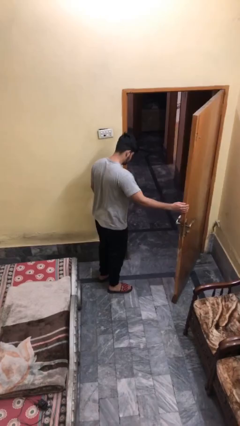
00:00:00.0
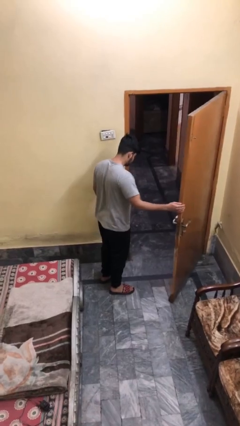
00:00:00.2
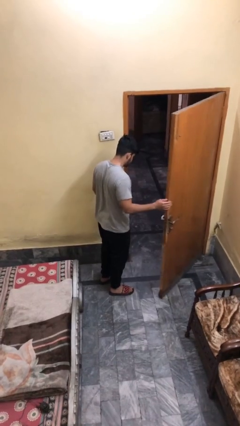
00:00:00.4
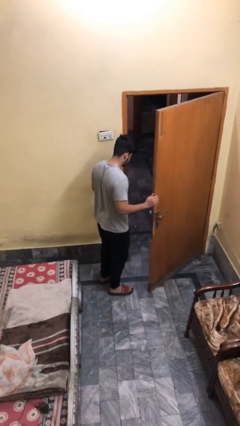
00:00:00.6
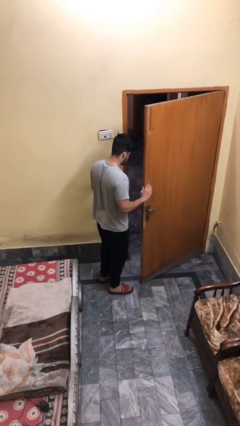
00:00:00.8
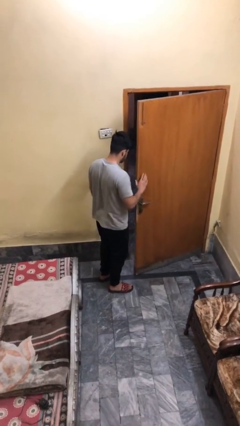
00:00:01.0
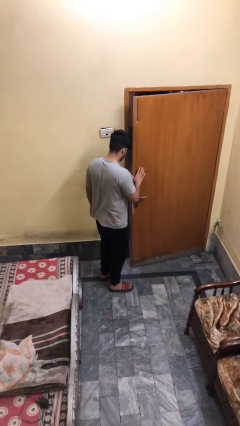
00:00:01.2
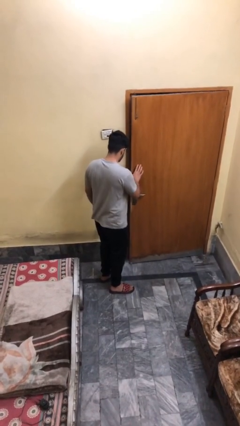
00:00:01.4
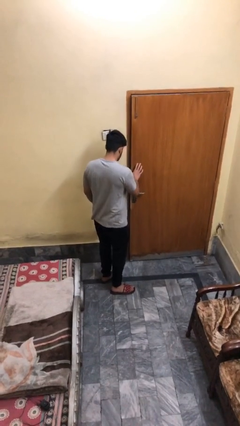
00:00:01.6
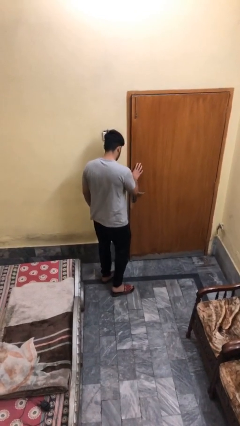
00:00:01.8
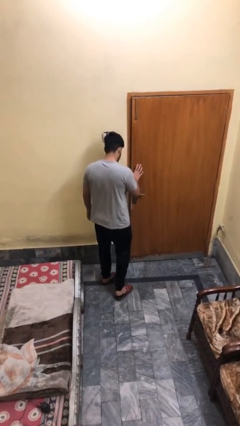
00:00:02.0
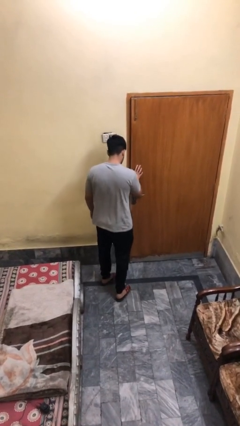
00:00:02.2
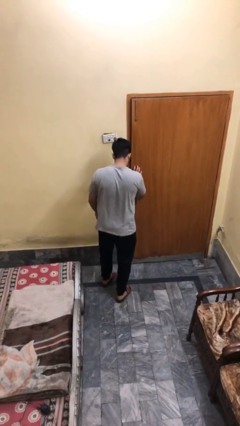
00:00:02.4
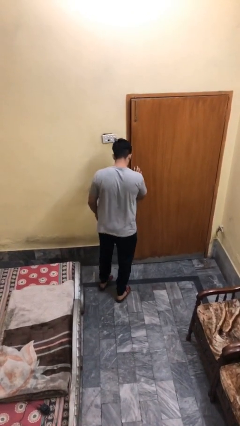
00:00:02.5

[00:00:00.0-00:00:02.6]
person closes facility door

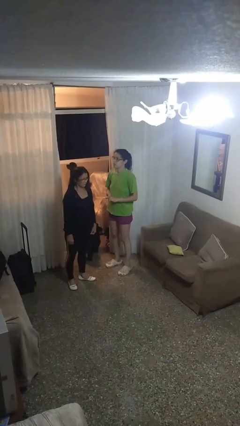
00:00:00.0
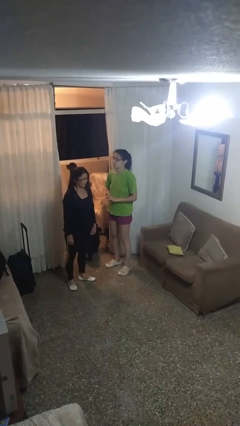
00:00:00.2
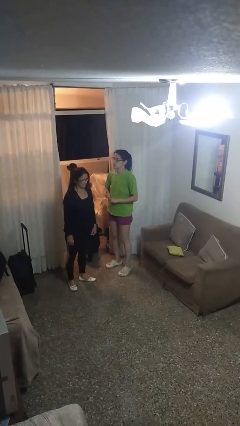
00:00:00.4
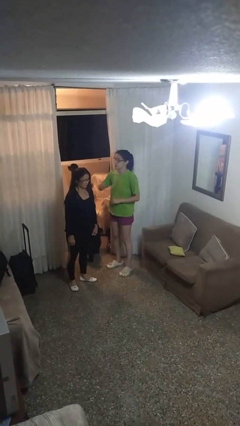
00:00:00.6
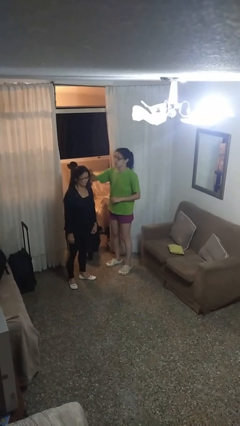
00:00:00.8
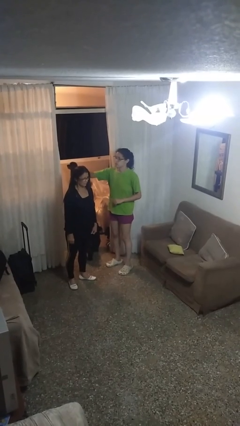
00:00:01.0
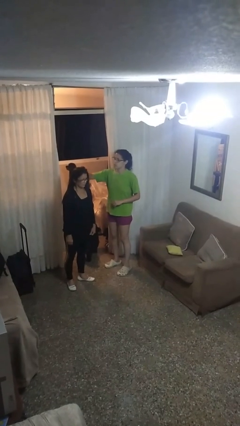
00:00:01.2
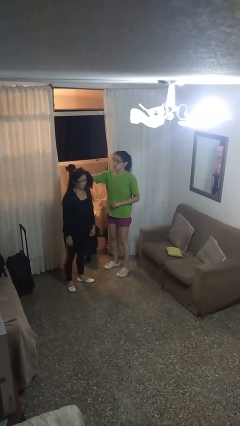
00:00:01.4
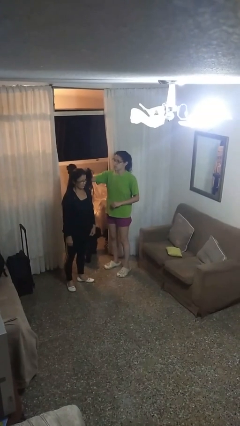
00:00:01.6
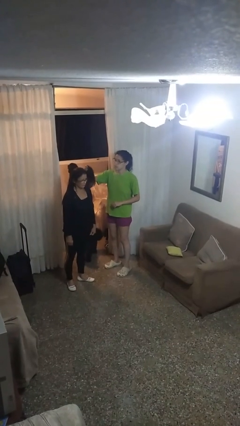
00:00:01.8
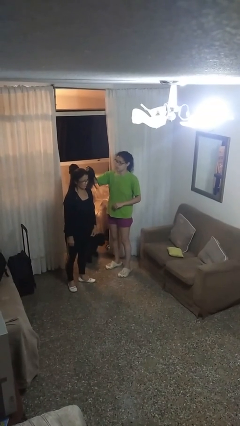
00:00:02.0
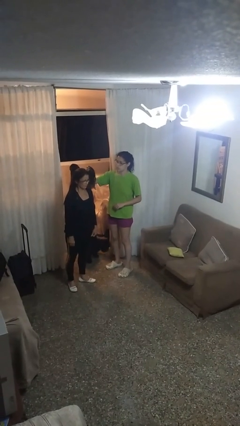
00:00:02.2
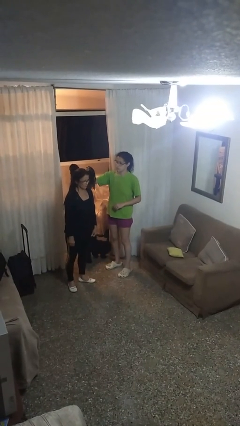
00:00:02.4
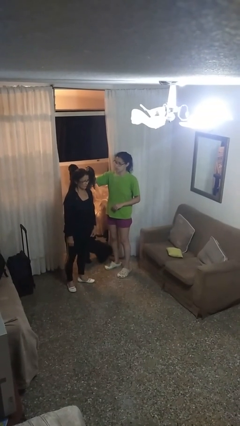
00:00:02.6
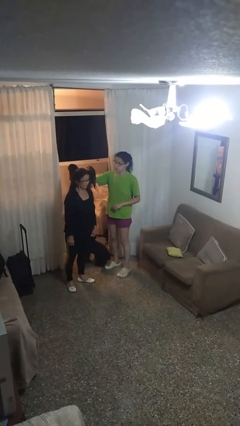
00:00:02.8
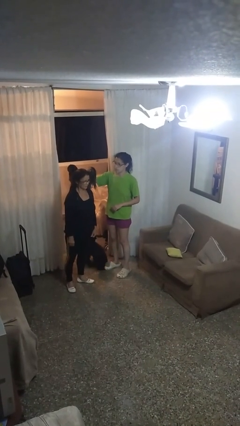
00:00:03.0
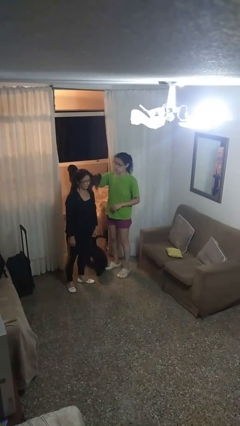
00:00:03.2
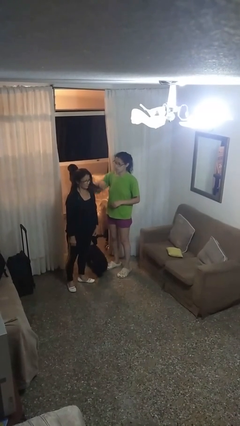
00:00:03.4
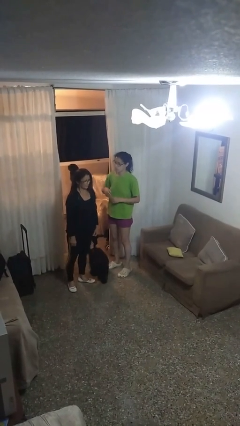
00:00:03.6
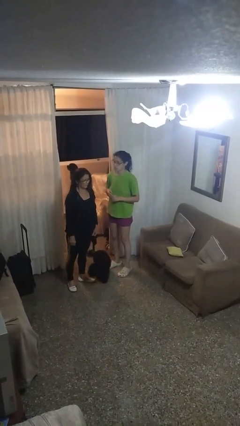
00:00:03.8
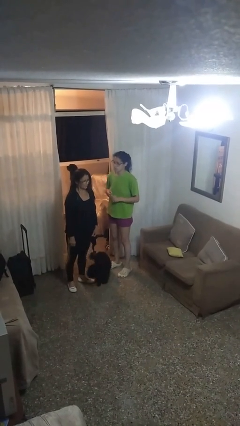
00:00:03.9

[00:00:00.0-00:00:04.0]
person grabs person by hair

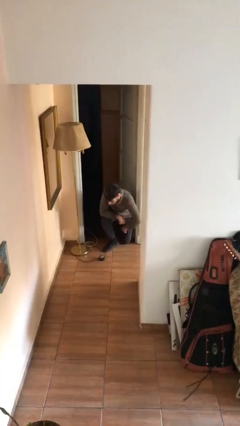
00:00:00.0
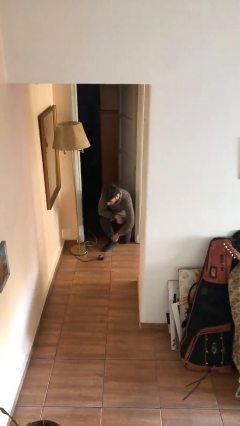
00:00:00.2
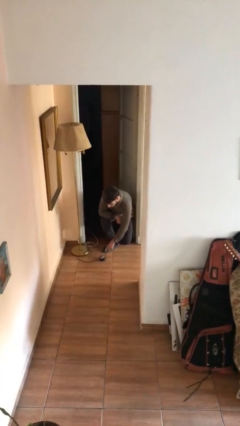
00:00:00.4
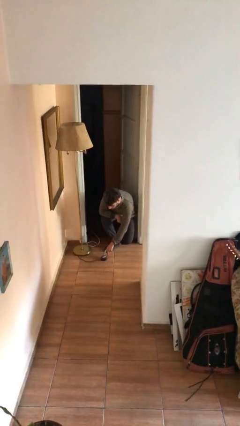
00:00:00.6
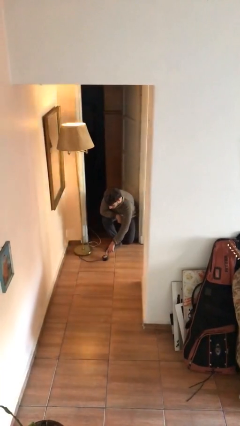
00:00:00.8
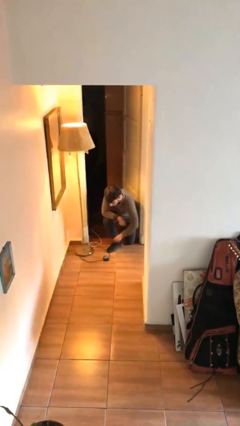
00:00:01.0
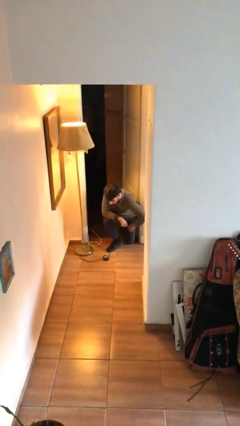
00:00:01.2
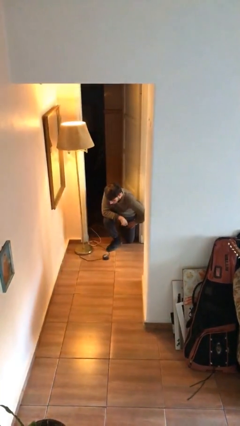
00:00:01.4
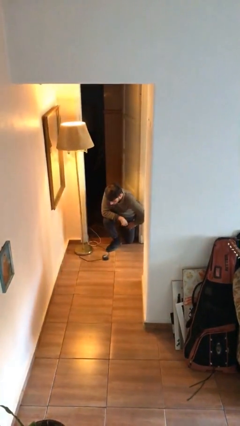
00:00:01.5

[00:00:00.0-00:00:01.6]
person turns on lamp

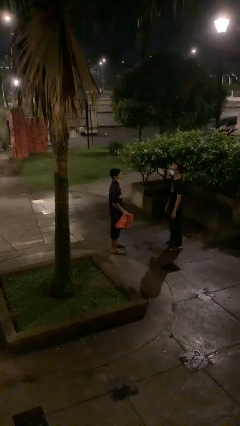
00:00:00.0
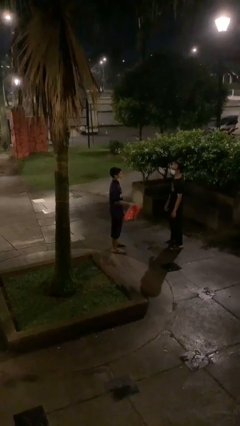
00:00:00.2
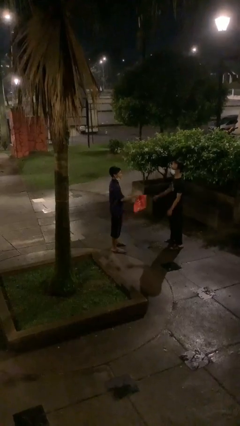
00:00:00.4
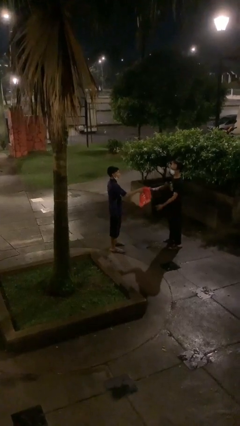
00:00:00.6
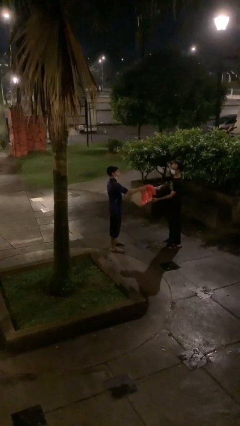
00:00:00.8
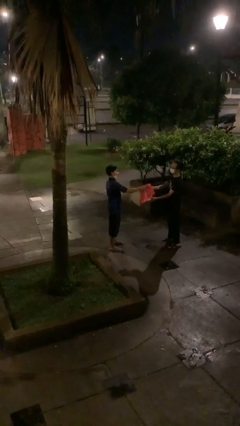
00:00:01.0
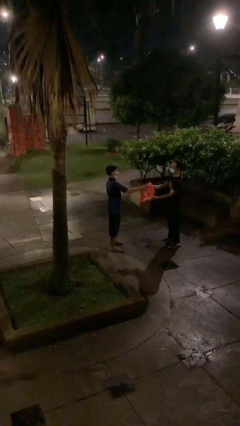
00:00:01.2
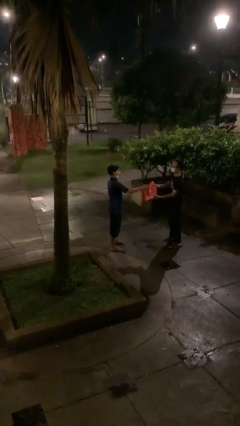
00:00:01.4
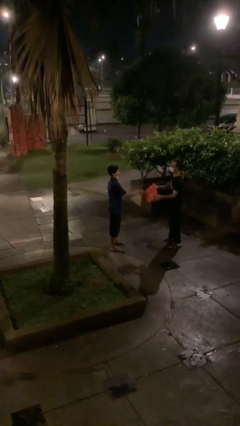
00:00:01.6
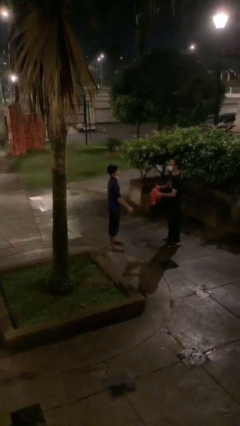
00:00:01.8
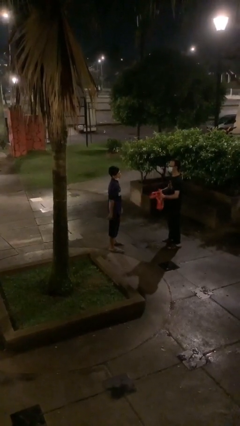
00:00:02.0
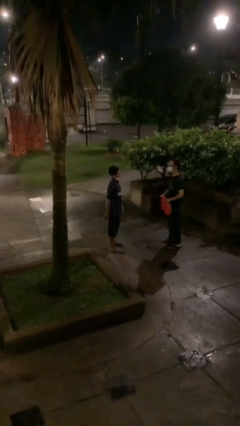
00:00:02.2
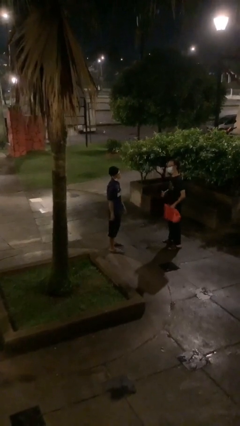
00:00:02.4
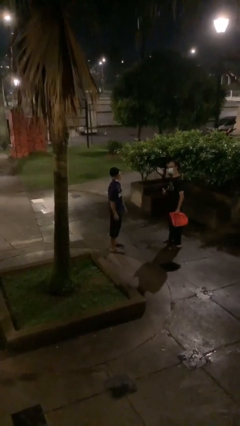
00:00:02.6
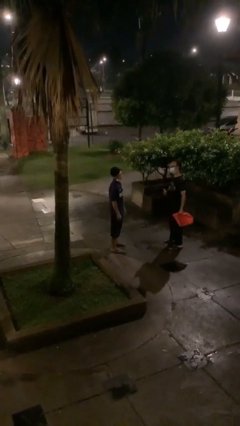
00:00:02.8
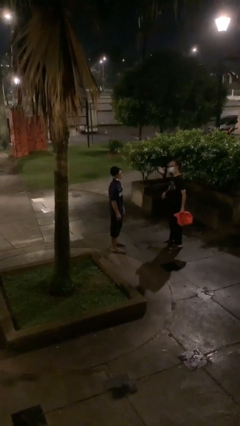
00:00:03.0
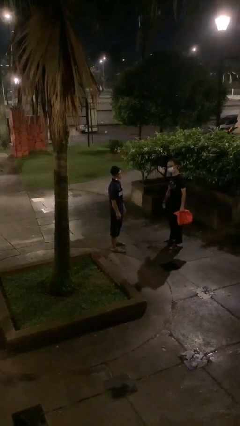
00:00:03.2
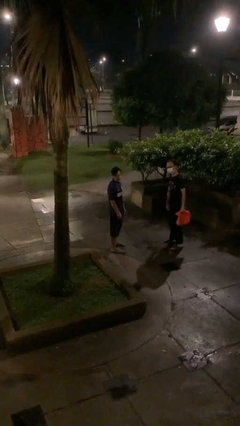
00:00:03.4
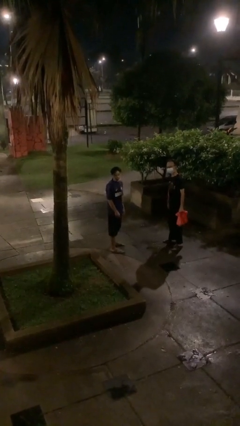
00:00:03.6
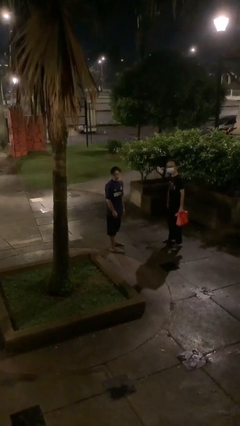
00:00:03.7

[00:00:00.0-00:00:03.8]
person transfers object to person

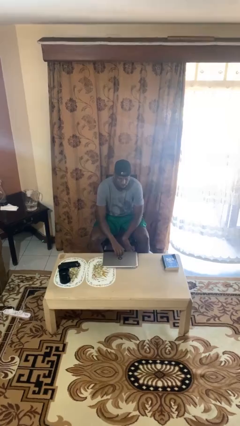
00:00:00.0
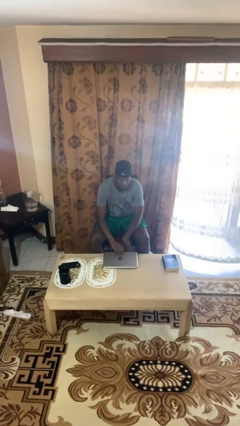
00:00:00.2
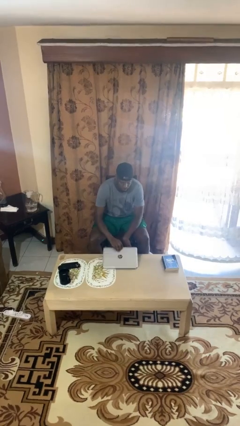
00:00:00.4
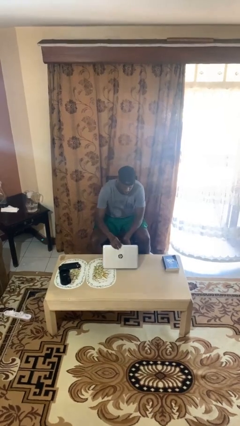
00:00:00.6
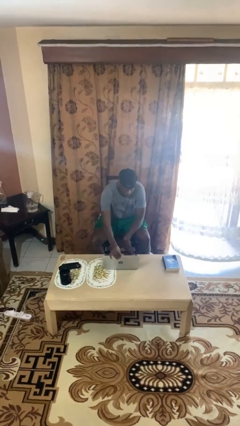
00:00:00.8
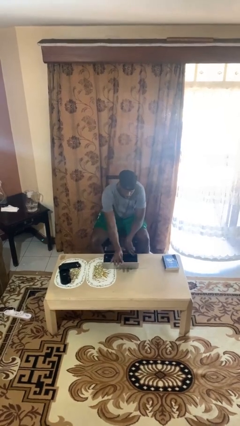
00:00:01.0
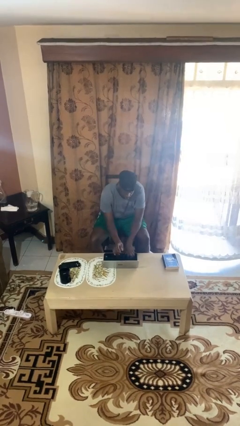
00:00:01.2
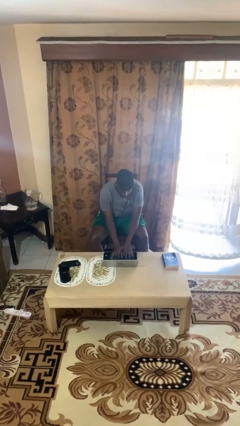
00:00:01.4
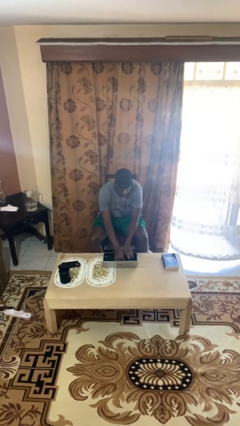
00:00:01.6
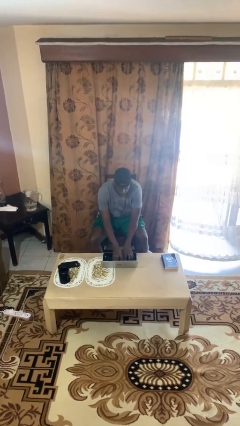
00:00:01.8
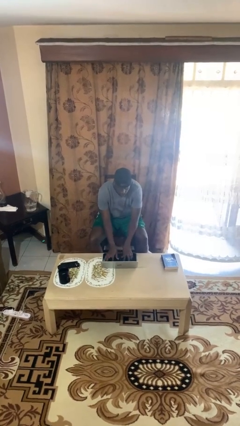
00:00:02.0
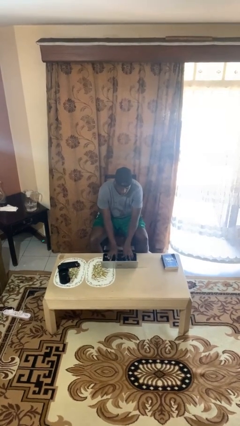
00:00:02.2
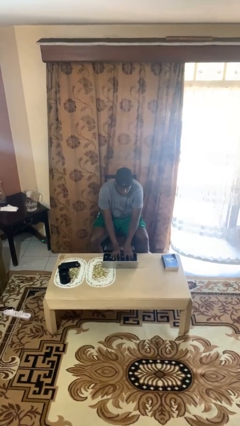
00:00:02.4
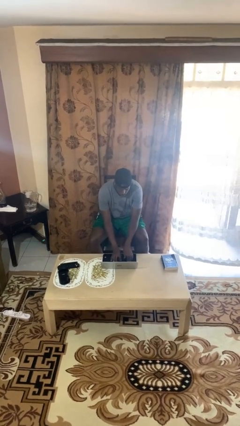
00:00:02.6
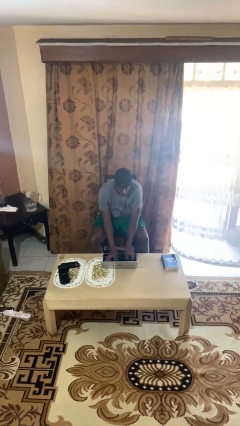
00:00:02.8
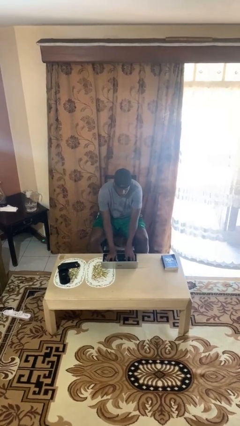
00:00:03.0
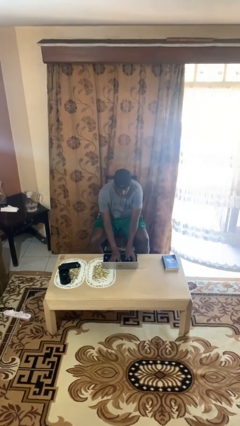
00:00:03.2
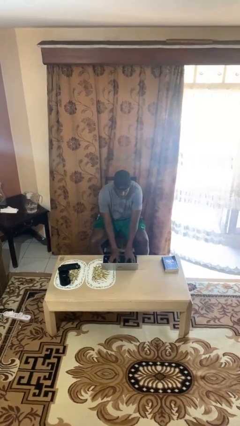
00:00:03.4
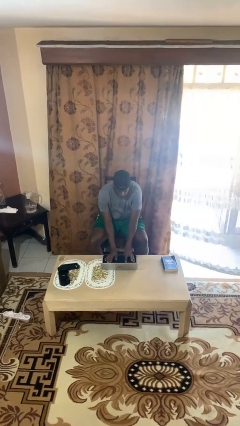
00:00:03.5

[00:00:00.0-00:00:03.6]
person interacts with laptop

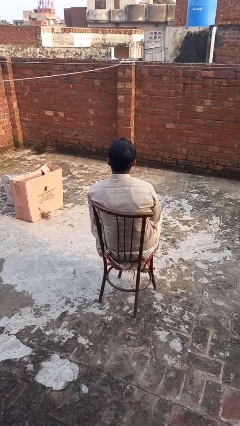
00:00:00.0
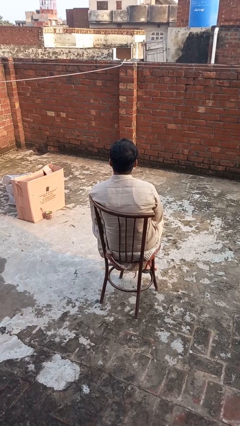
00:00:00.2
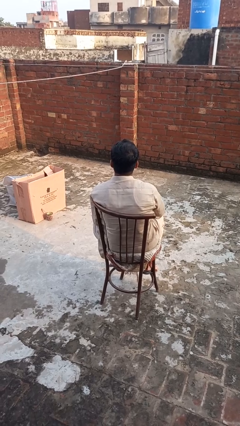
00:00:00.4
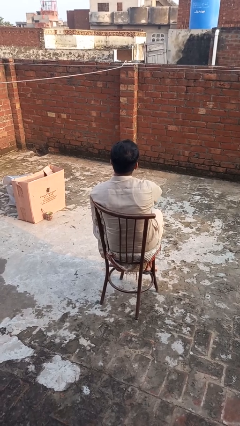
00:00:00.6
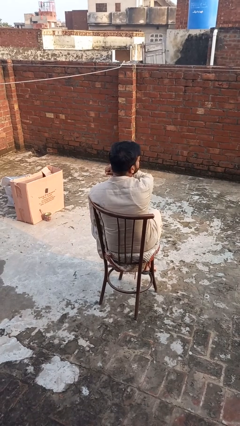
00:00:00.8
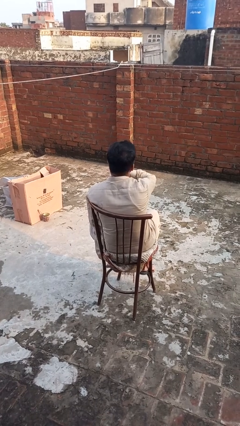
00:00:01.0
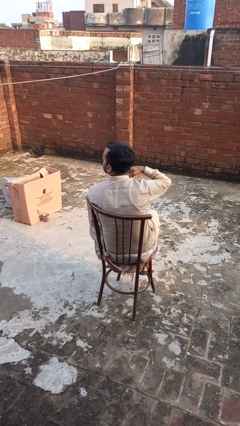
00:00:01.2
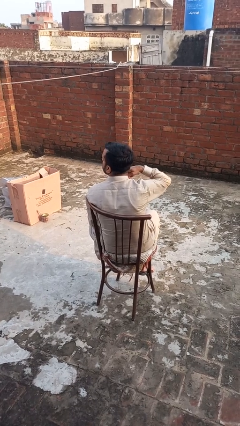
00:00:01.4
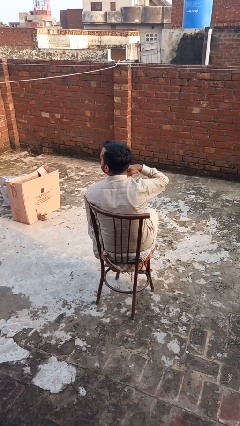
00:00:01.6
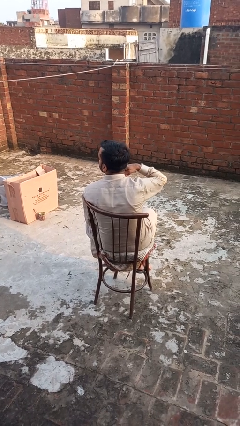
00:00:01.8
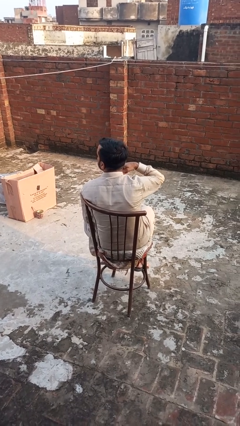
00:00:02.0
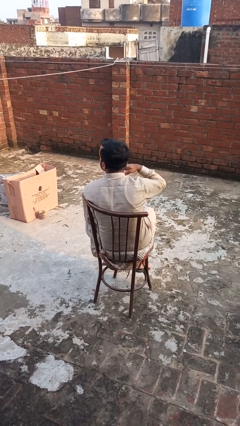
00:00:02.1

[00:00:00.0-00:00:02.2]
person gestures cut
